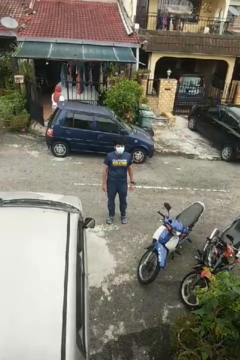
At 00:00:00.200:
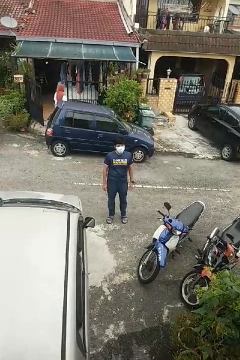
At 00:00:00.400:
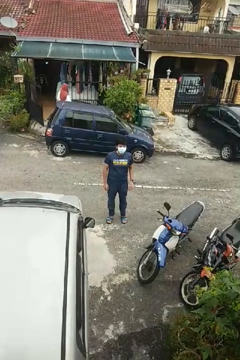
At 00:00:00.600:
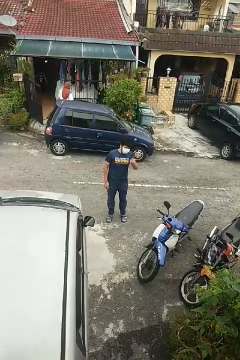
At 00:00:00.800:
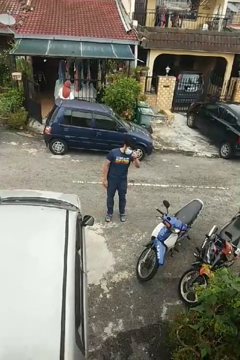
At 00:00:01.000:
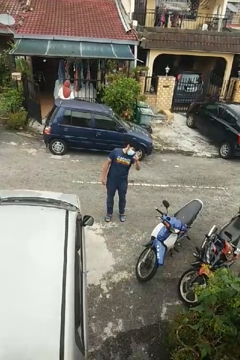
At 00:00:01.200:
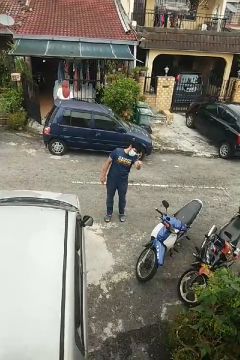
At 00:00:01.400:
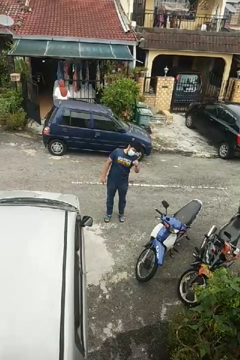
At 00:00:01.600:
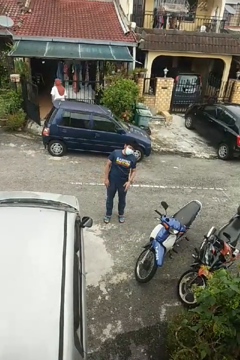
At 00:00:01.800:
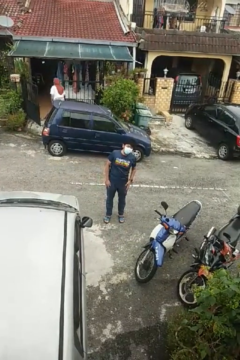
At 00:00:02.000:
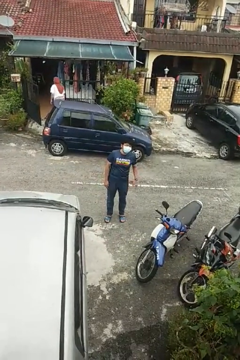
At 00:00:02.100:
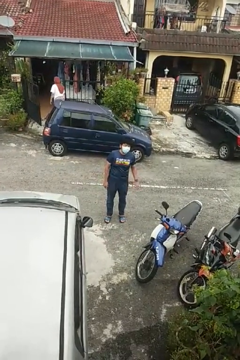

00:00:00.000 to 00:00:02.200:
person points at person

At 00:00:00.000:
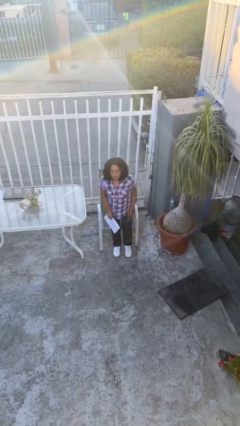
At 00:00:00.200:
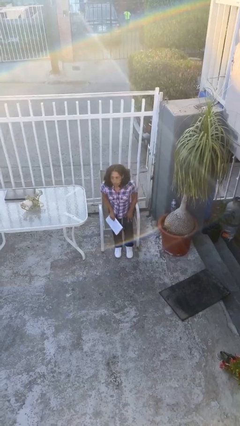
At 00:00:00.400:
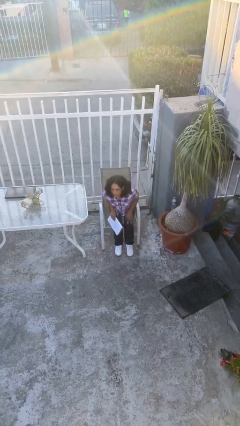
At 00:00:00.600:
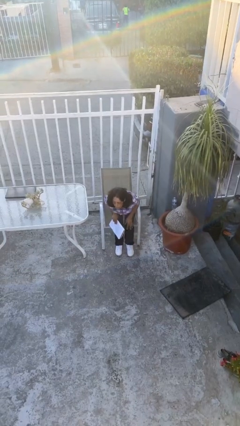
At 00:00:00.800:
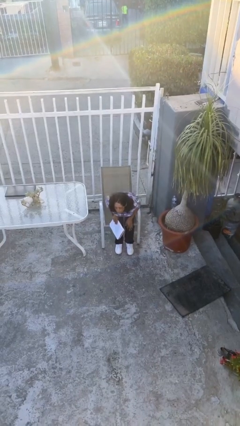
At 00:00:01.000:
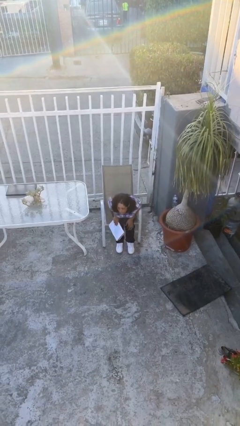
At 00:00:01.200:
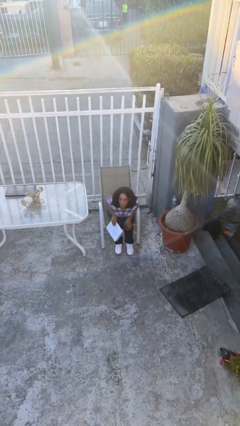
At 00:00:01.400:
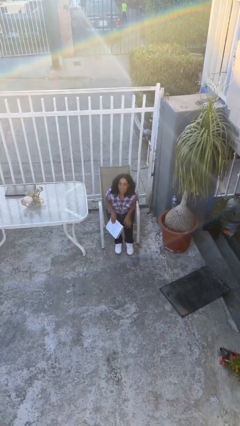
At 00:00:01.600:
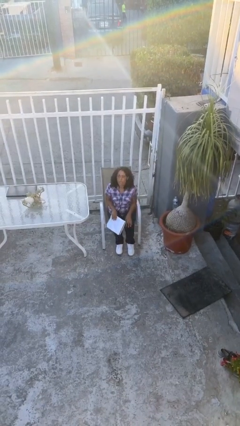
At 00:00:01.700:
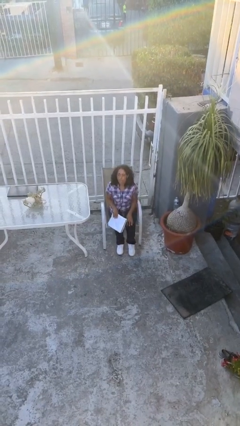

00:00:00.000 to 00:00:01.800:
person sits down

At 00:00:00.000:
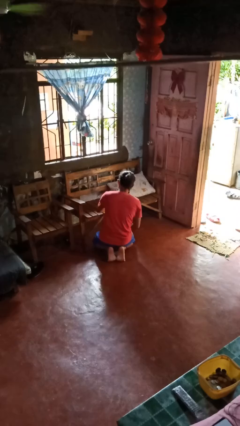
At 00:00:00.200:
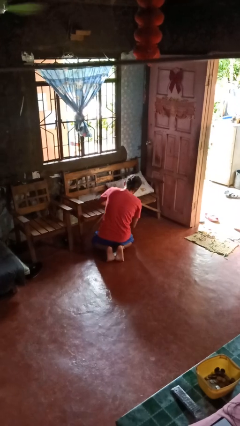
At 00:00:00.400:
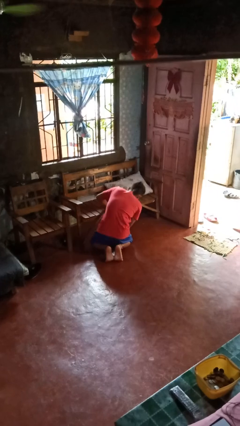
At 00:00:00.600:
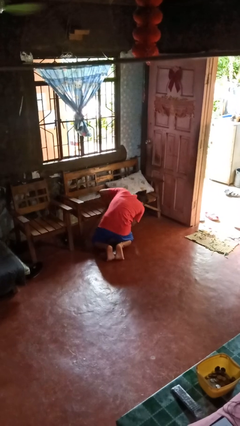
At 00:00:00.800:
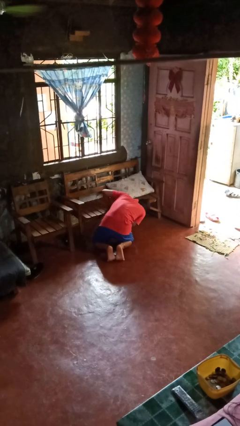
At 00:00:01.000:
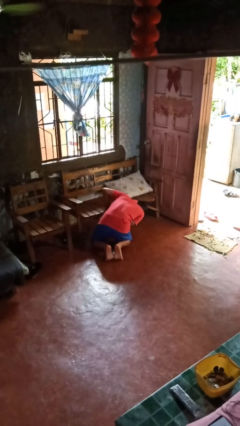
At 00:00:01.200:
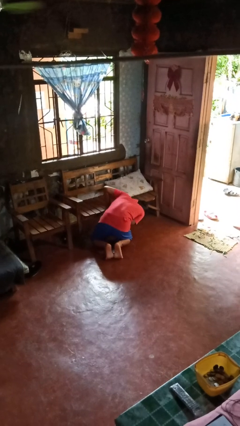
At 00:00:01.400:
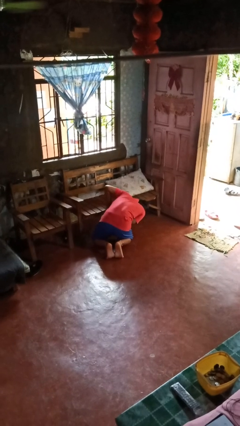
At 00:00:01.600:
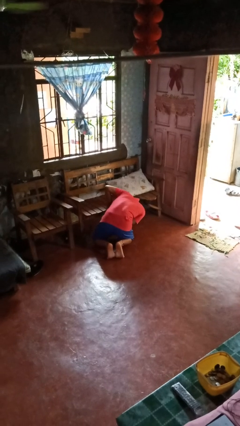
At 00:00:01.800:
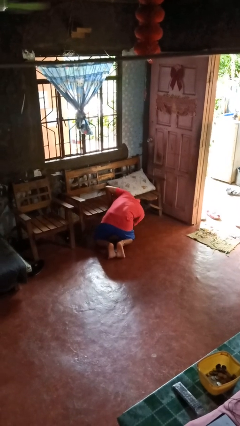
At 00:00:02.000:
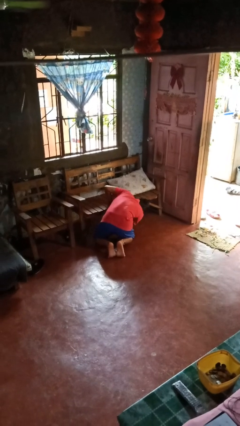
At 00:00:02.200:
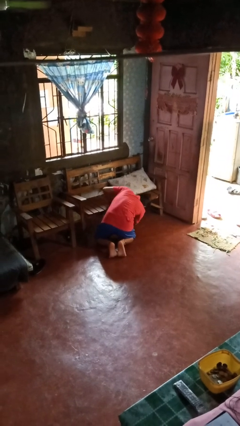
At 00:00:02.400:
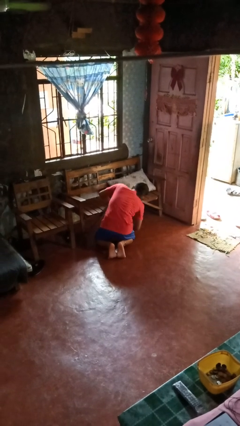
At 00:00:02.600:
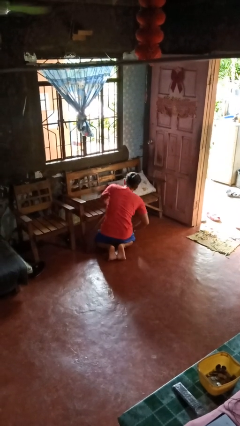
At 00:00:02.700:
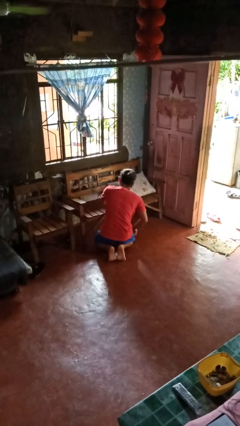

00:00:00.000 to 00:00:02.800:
person searches in couch

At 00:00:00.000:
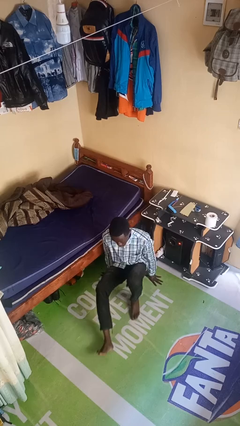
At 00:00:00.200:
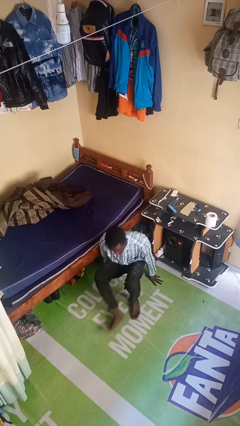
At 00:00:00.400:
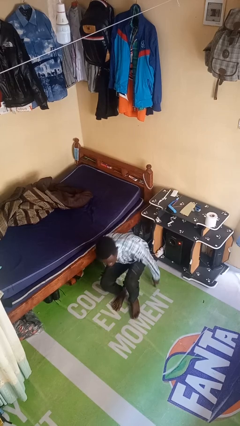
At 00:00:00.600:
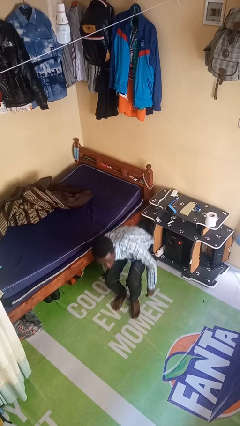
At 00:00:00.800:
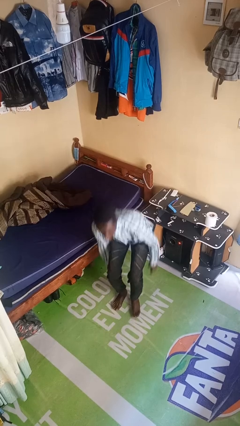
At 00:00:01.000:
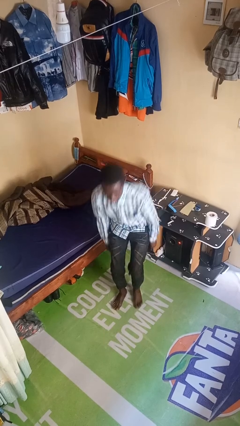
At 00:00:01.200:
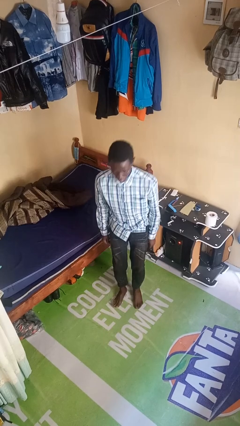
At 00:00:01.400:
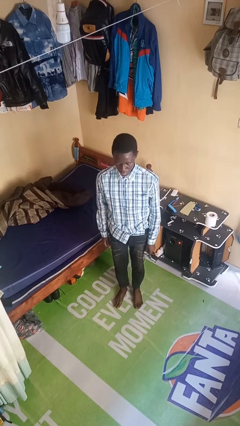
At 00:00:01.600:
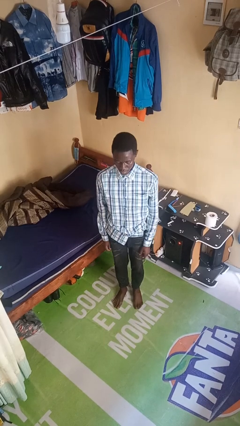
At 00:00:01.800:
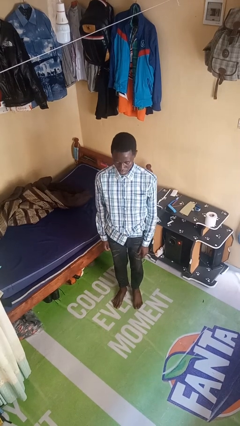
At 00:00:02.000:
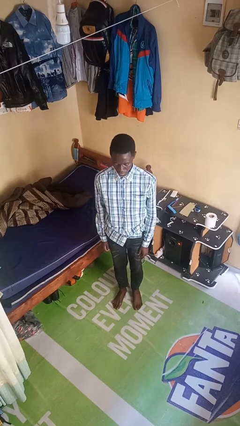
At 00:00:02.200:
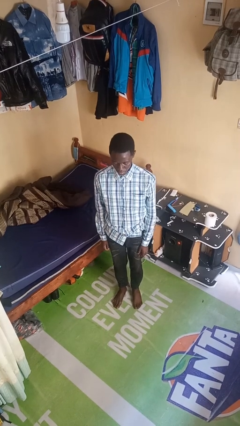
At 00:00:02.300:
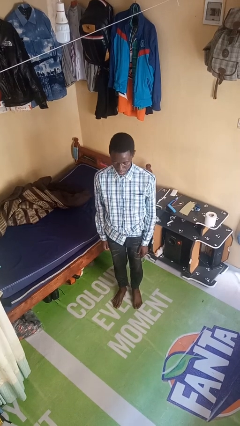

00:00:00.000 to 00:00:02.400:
person stands up from floor

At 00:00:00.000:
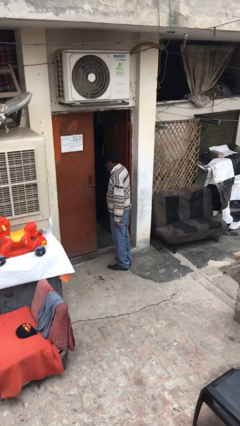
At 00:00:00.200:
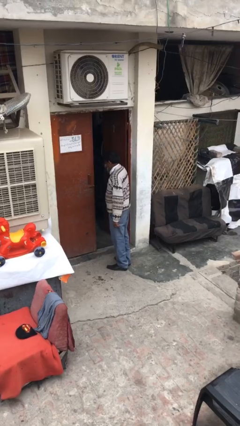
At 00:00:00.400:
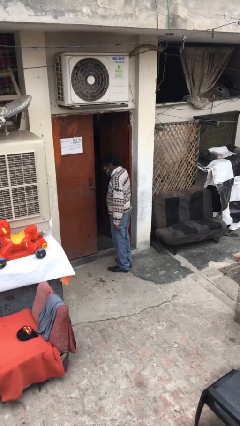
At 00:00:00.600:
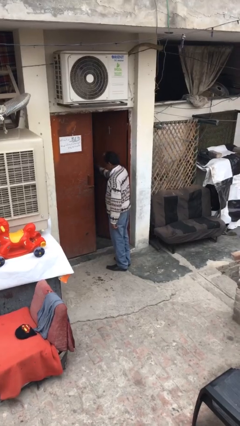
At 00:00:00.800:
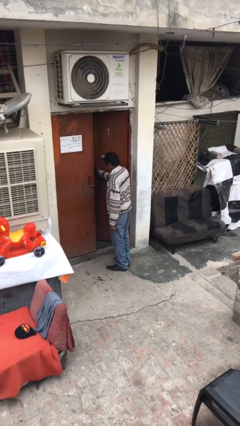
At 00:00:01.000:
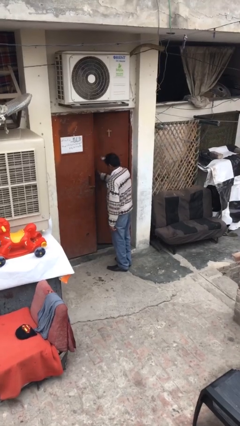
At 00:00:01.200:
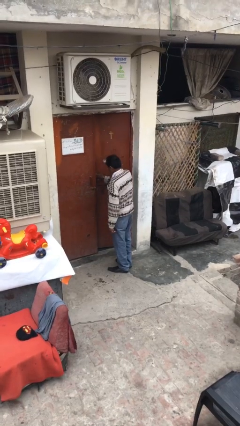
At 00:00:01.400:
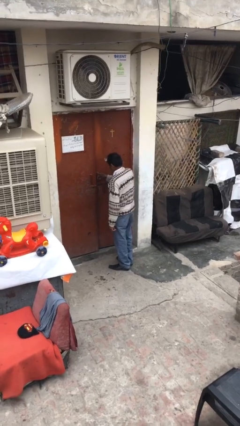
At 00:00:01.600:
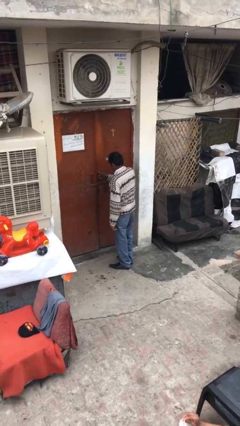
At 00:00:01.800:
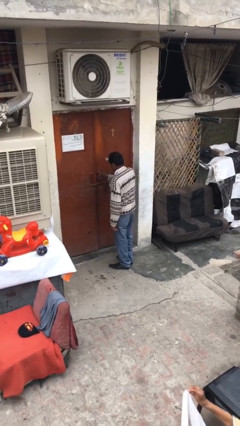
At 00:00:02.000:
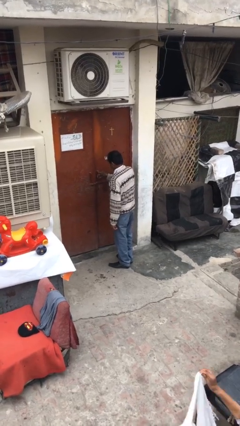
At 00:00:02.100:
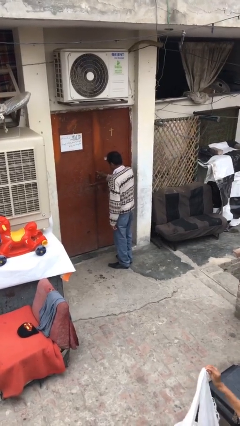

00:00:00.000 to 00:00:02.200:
person closes facility door

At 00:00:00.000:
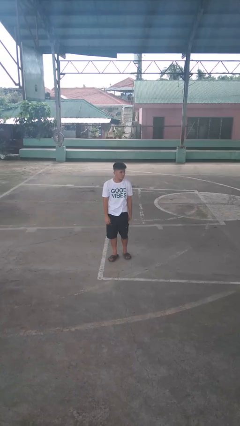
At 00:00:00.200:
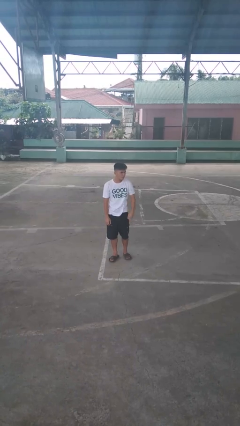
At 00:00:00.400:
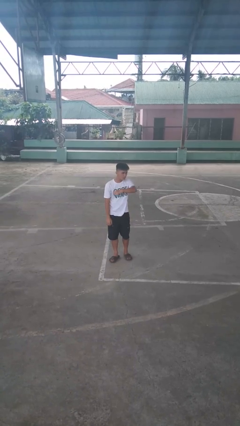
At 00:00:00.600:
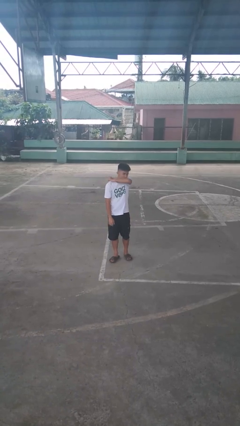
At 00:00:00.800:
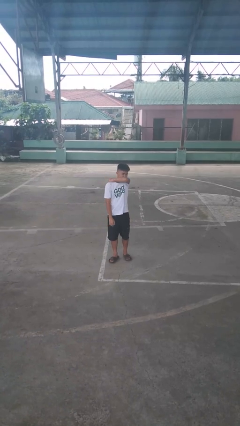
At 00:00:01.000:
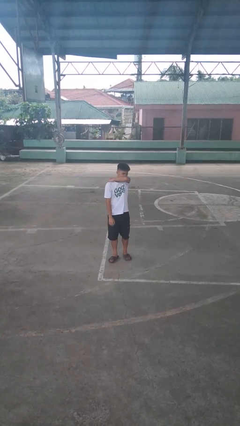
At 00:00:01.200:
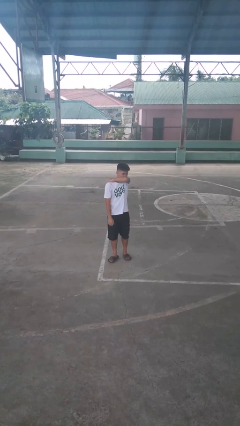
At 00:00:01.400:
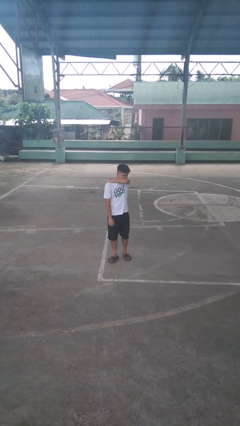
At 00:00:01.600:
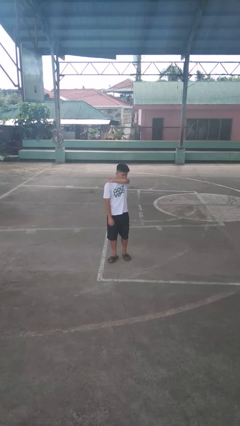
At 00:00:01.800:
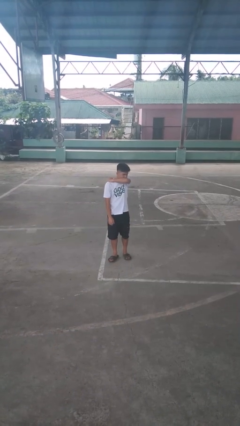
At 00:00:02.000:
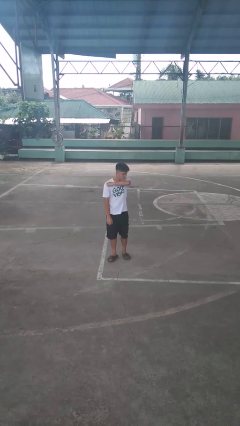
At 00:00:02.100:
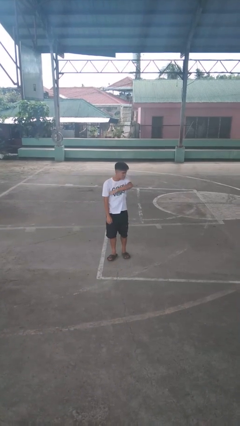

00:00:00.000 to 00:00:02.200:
person sneezes into arm

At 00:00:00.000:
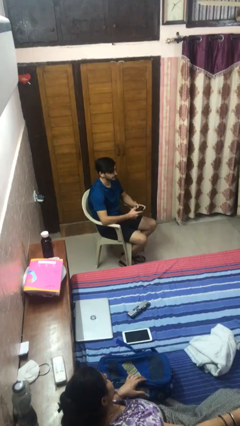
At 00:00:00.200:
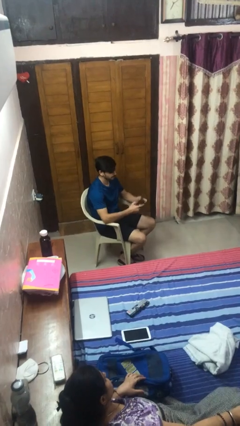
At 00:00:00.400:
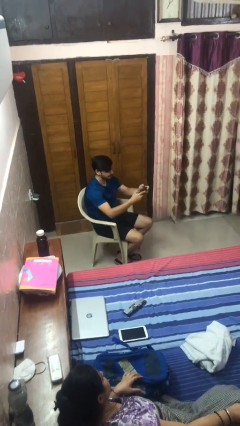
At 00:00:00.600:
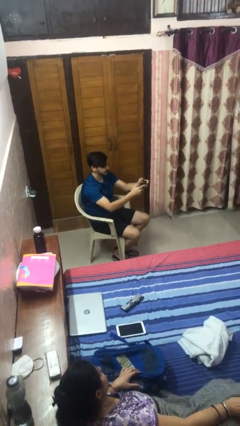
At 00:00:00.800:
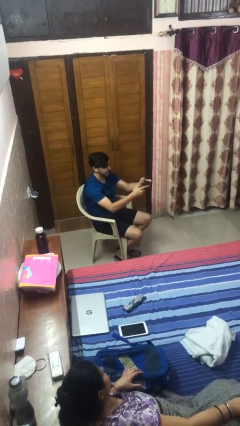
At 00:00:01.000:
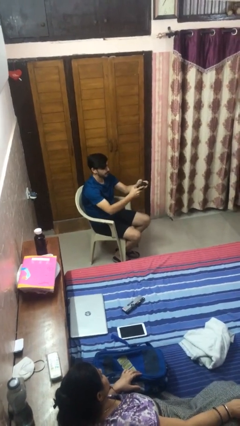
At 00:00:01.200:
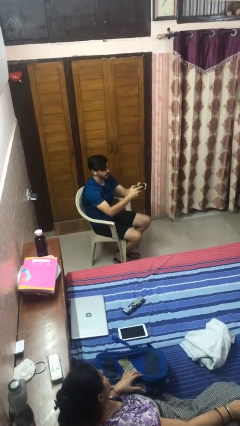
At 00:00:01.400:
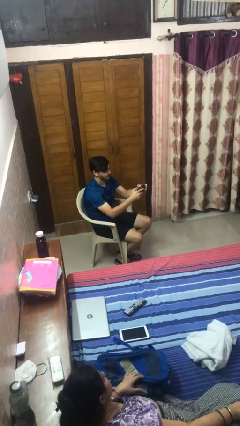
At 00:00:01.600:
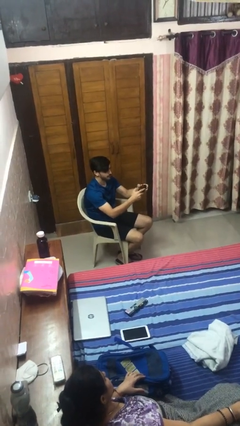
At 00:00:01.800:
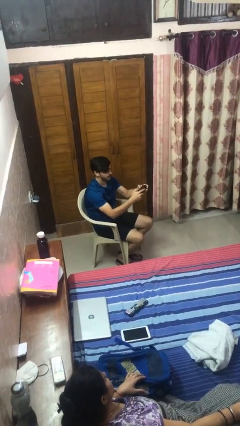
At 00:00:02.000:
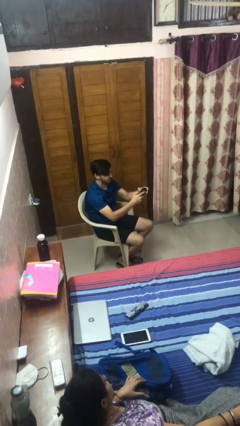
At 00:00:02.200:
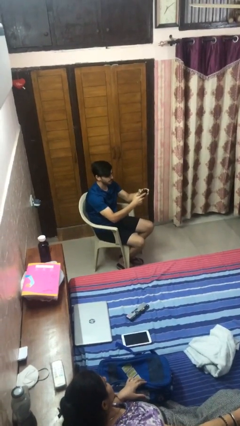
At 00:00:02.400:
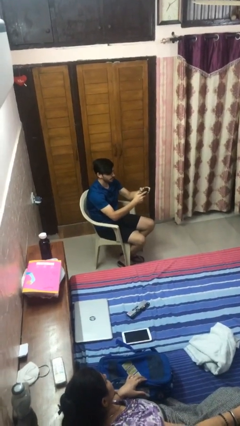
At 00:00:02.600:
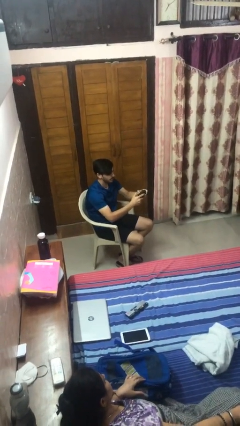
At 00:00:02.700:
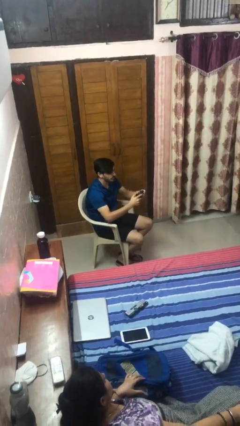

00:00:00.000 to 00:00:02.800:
person interacts with handheld game

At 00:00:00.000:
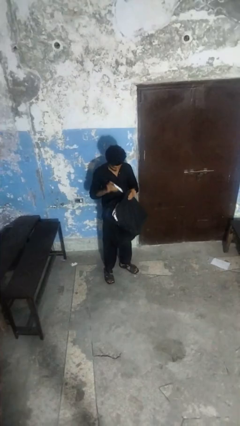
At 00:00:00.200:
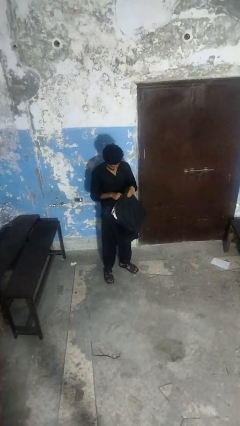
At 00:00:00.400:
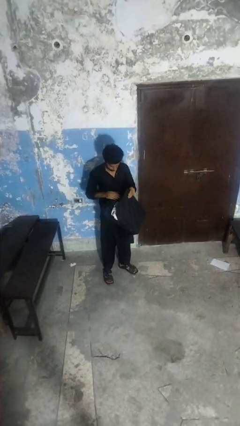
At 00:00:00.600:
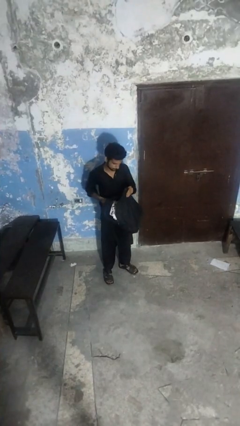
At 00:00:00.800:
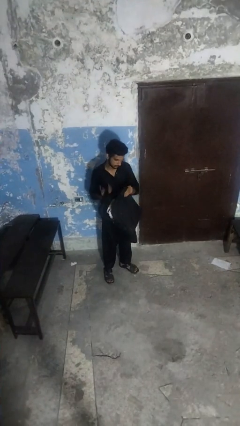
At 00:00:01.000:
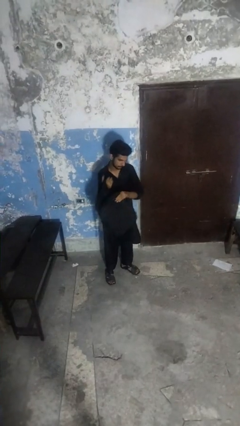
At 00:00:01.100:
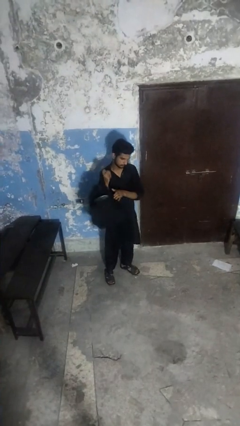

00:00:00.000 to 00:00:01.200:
person puts object into backpack
